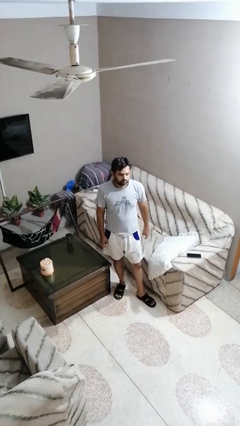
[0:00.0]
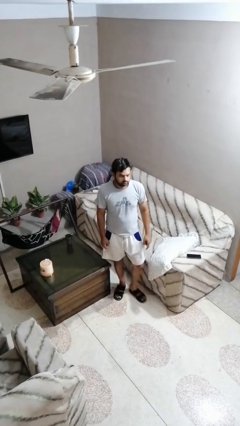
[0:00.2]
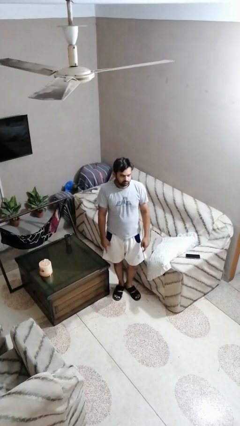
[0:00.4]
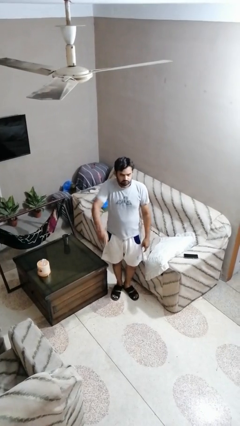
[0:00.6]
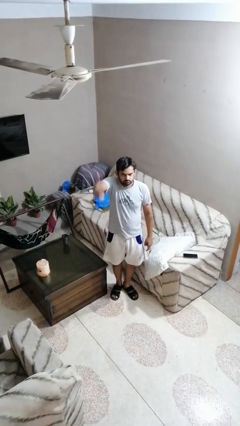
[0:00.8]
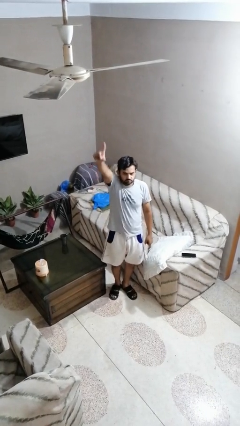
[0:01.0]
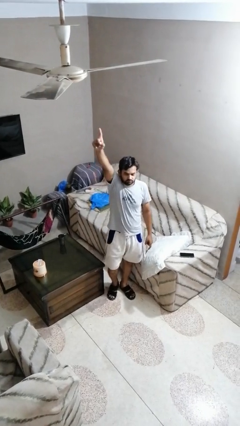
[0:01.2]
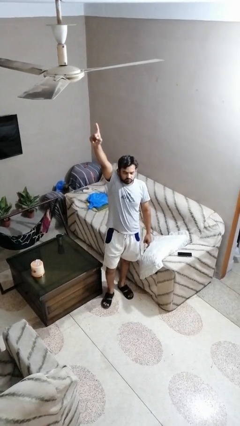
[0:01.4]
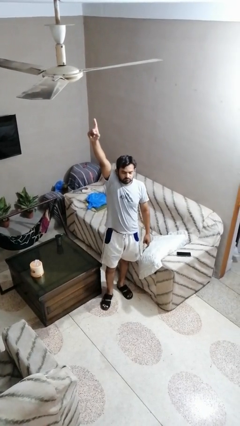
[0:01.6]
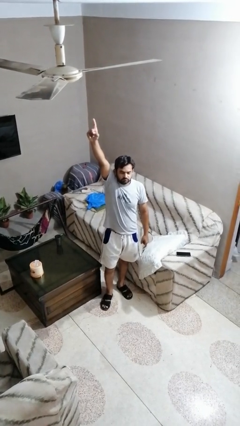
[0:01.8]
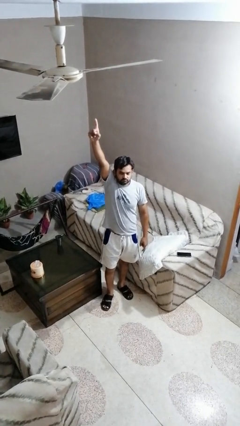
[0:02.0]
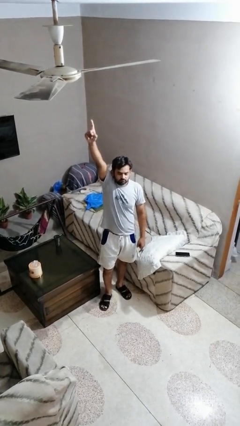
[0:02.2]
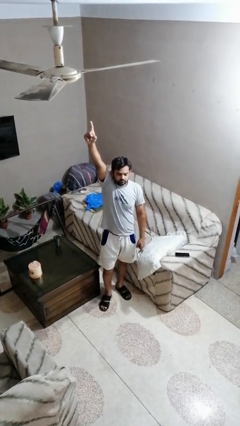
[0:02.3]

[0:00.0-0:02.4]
person gestures number one

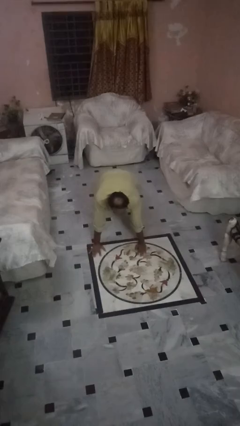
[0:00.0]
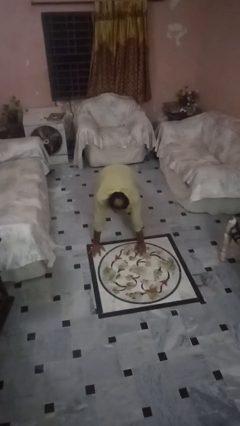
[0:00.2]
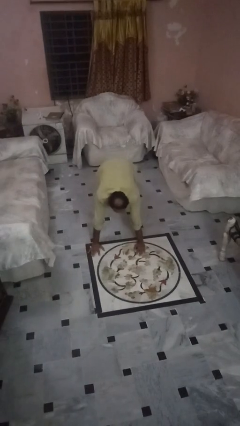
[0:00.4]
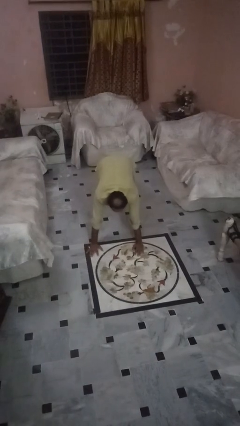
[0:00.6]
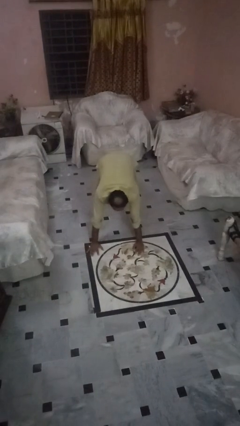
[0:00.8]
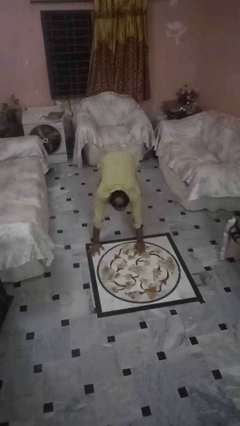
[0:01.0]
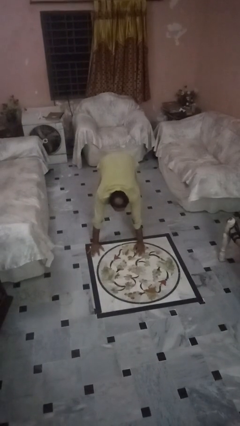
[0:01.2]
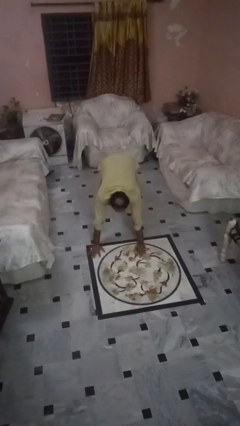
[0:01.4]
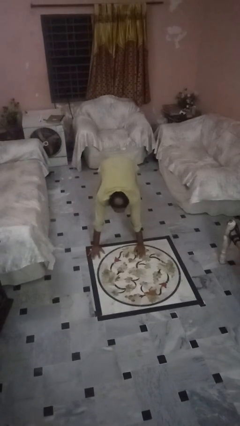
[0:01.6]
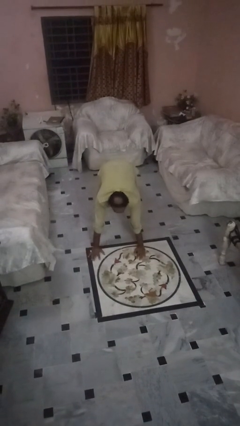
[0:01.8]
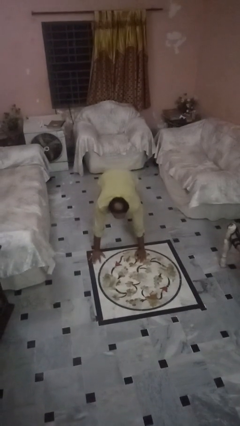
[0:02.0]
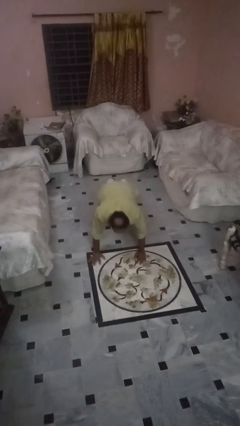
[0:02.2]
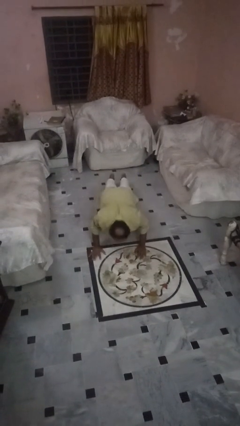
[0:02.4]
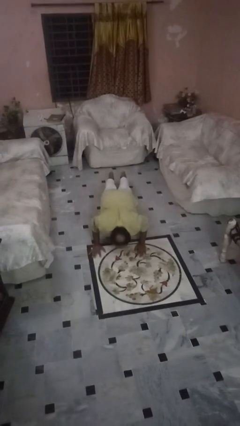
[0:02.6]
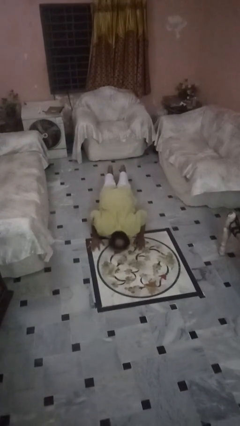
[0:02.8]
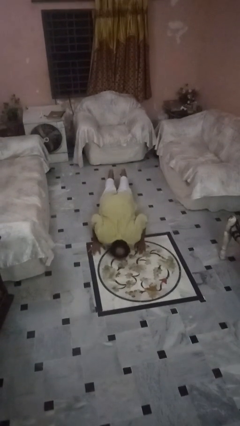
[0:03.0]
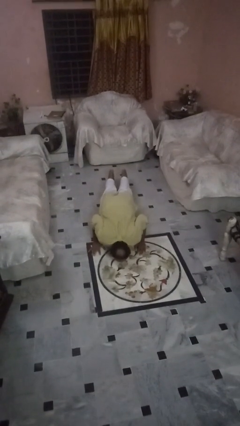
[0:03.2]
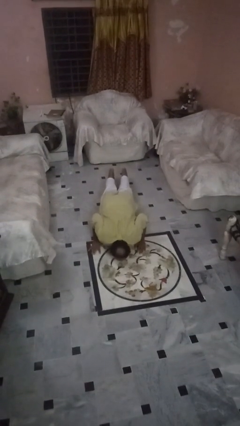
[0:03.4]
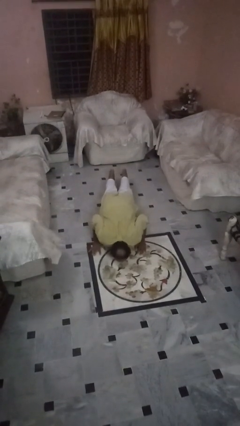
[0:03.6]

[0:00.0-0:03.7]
person exercises with pushup

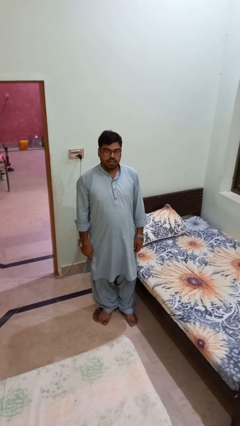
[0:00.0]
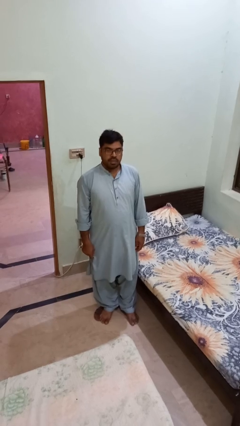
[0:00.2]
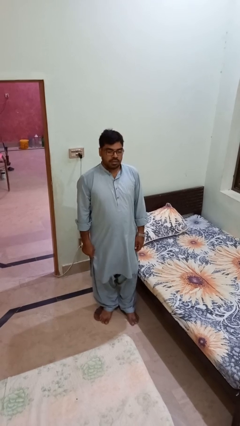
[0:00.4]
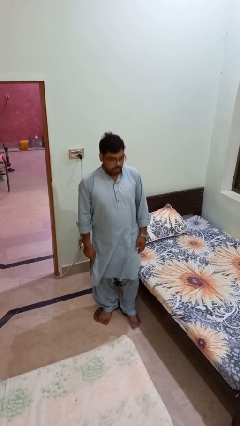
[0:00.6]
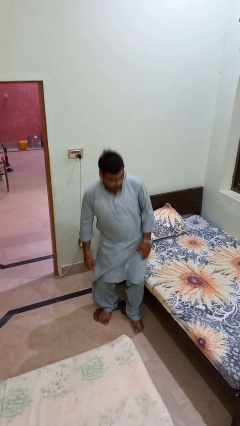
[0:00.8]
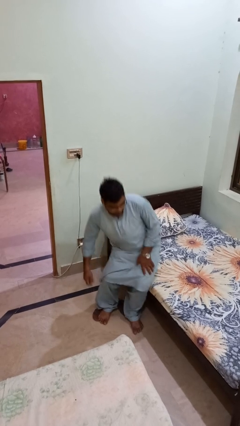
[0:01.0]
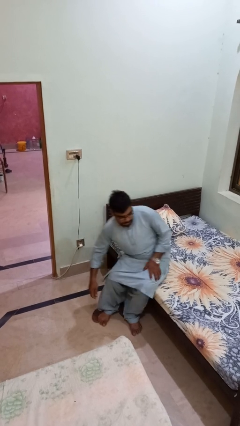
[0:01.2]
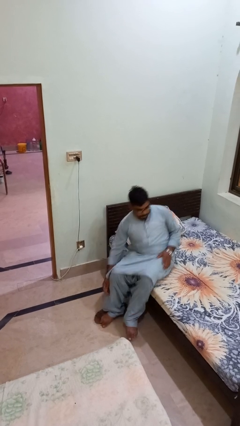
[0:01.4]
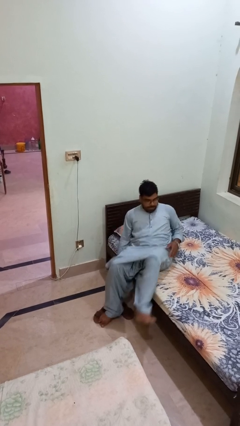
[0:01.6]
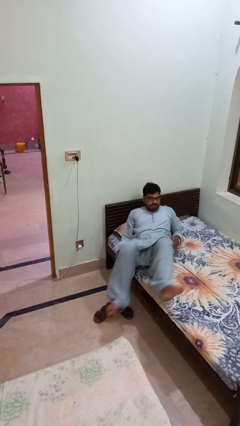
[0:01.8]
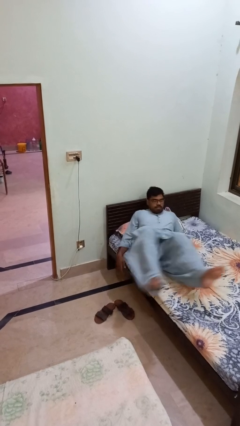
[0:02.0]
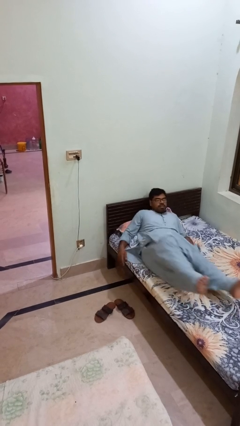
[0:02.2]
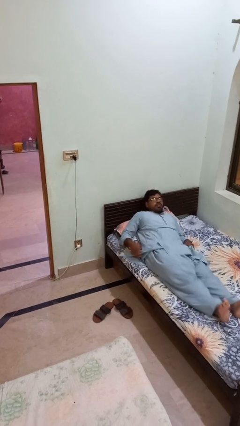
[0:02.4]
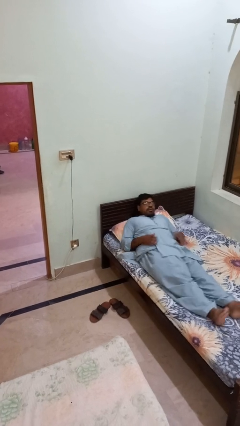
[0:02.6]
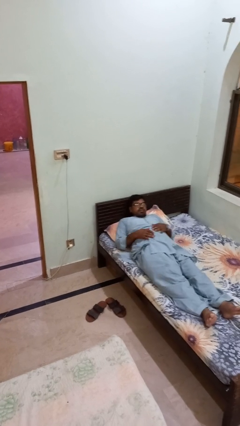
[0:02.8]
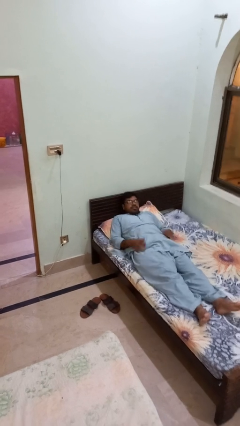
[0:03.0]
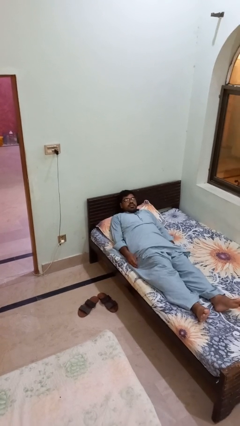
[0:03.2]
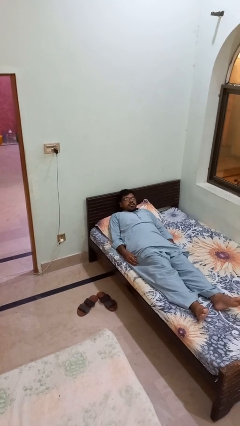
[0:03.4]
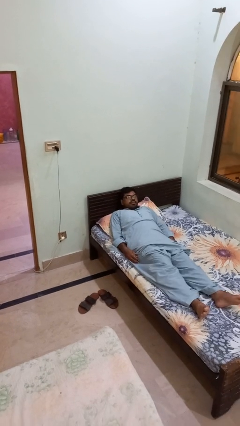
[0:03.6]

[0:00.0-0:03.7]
person lies down on bed

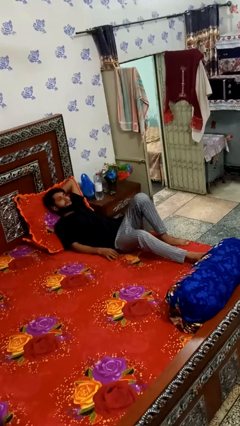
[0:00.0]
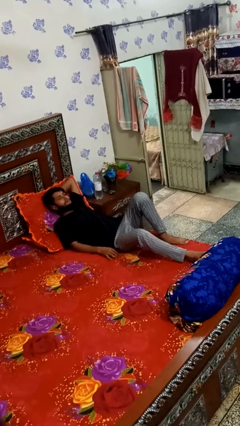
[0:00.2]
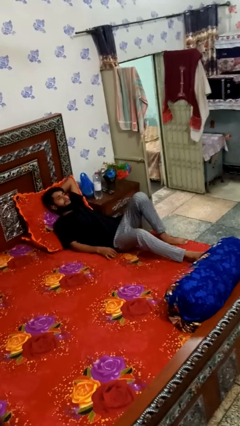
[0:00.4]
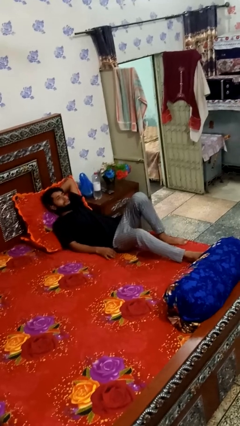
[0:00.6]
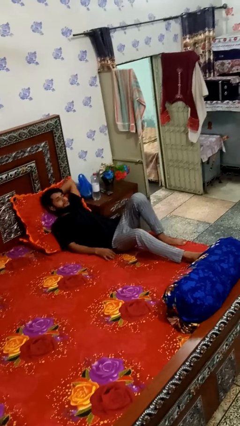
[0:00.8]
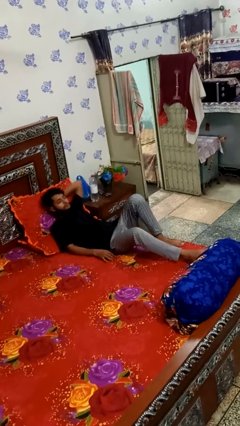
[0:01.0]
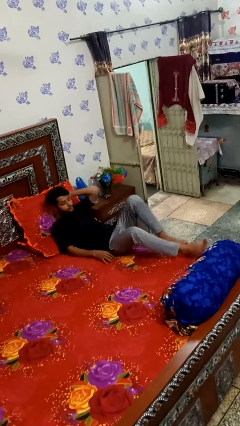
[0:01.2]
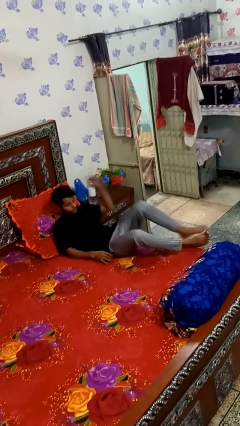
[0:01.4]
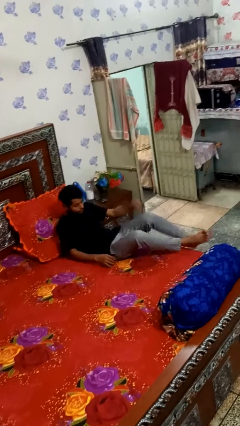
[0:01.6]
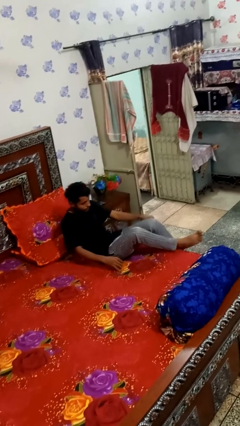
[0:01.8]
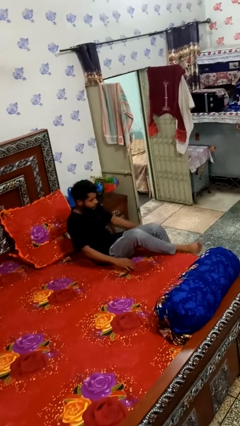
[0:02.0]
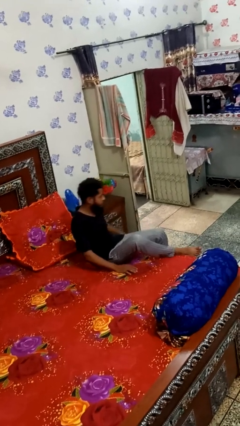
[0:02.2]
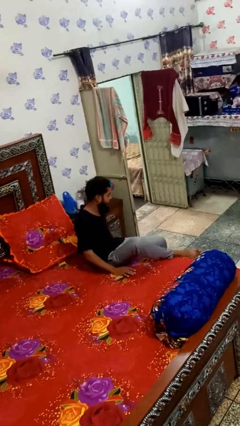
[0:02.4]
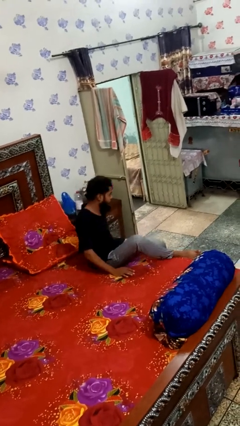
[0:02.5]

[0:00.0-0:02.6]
person stands up

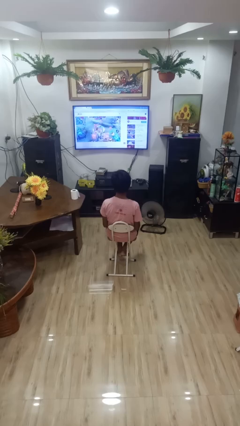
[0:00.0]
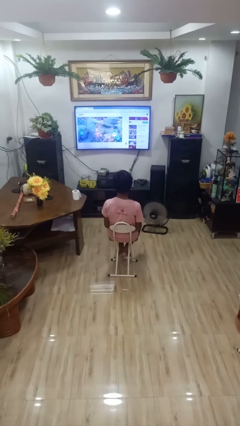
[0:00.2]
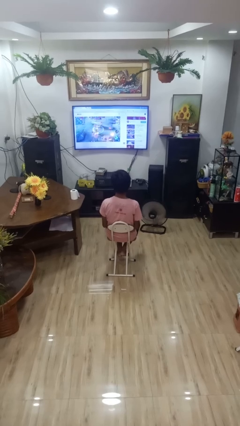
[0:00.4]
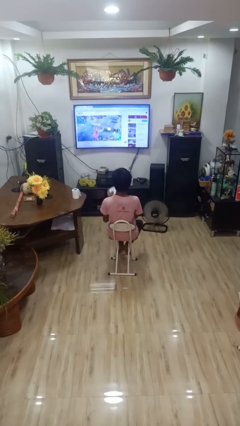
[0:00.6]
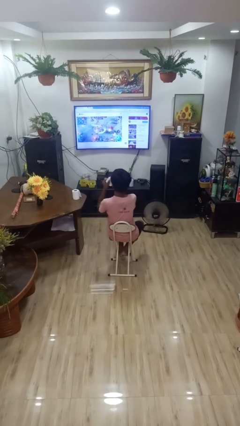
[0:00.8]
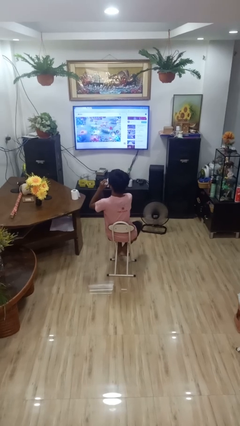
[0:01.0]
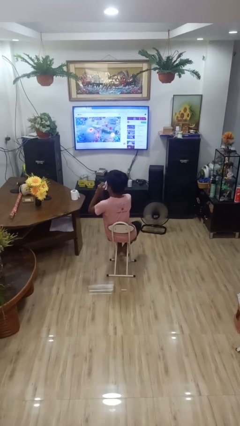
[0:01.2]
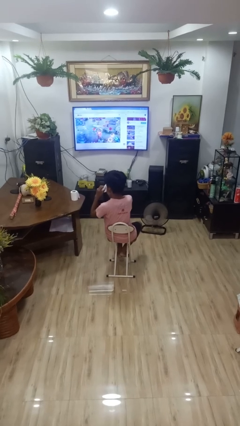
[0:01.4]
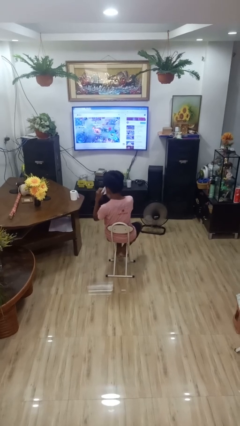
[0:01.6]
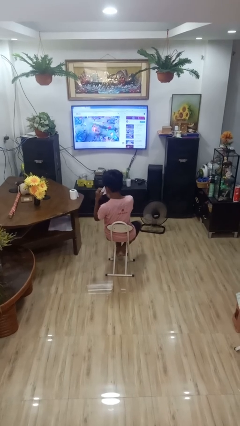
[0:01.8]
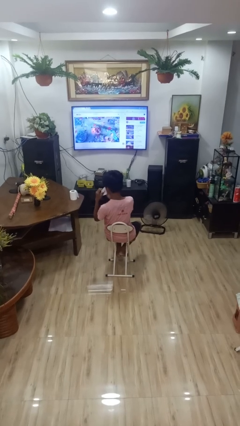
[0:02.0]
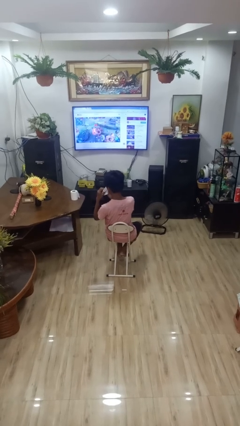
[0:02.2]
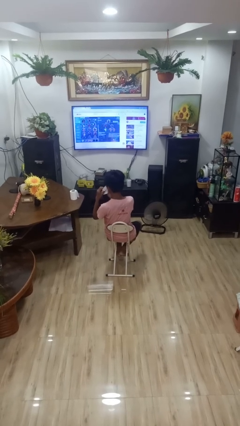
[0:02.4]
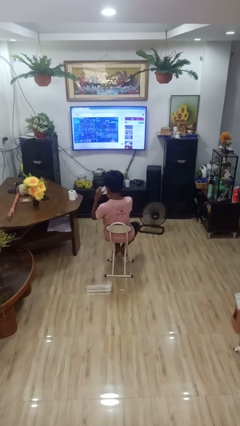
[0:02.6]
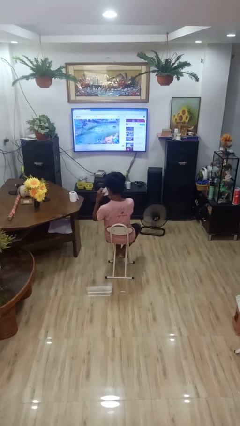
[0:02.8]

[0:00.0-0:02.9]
person blows nose

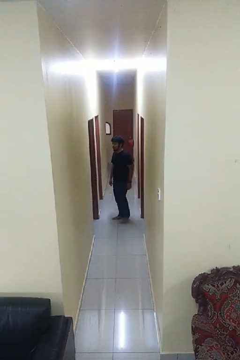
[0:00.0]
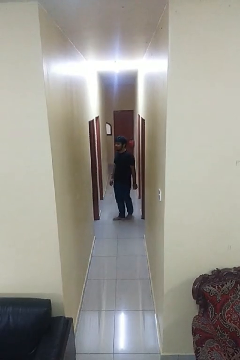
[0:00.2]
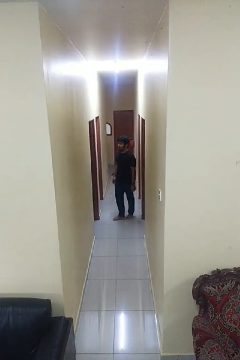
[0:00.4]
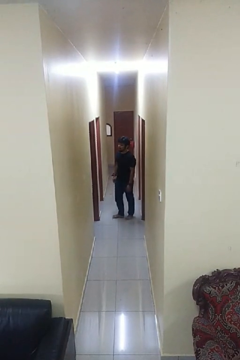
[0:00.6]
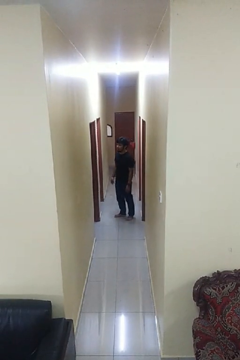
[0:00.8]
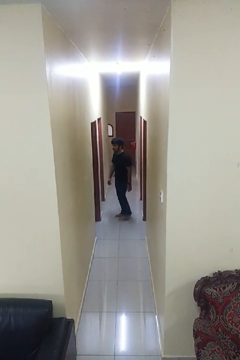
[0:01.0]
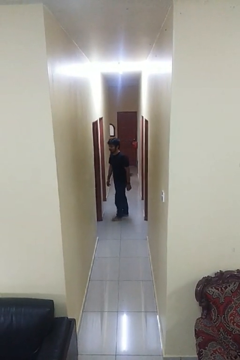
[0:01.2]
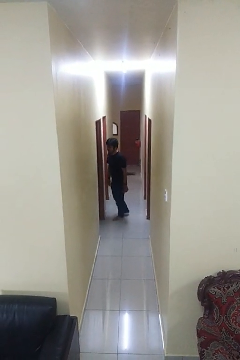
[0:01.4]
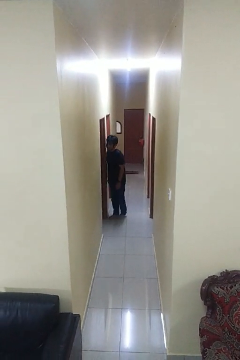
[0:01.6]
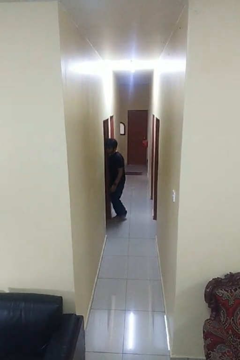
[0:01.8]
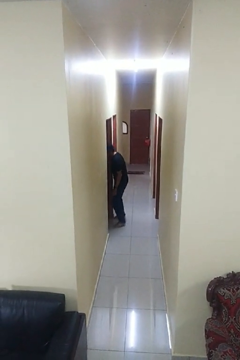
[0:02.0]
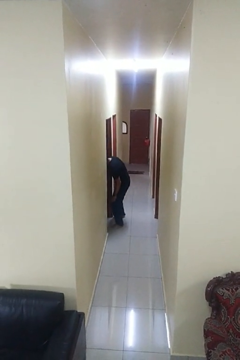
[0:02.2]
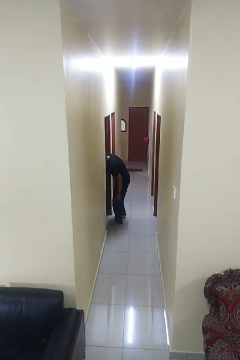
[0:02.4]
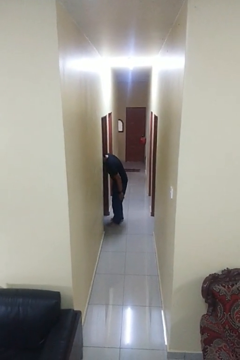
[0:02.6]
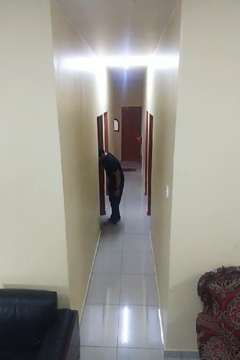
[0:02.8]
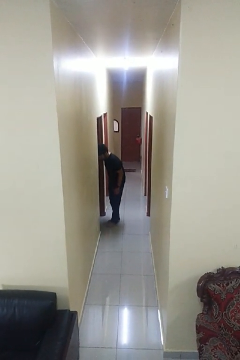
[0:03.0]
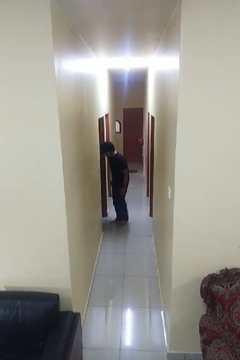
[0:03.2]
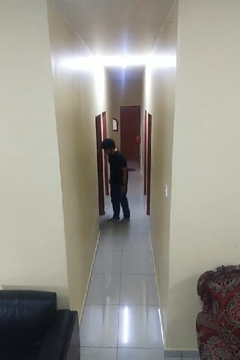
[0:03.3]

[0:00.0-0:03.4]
person bumps into wall
